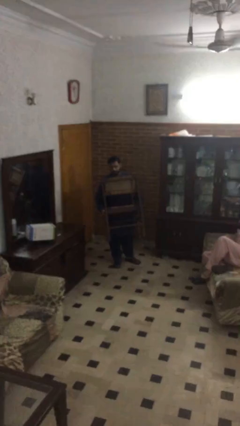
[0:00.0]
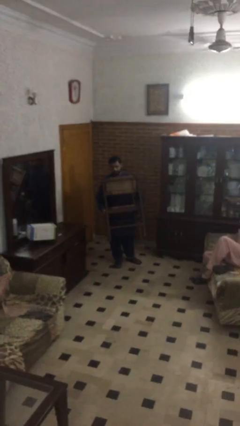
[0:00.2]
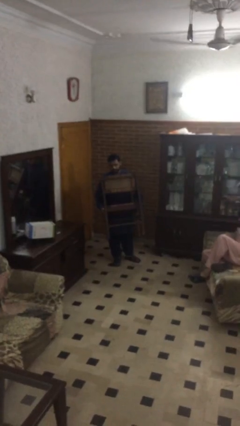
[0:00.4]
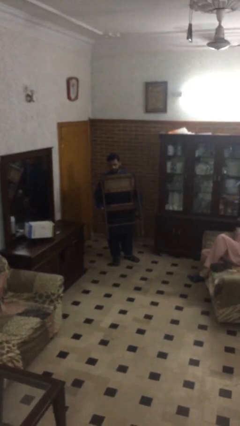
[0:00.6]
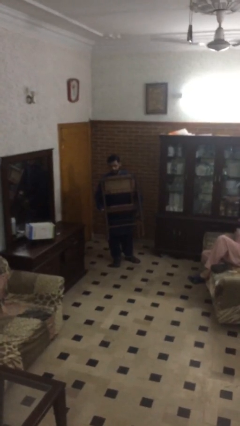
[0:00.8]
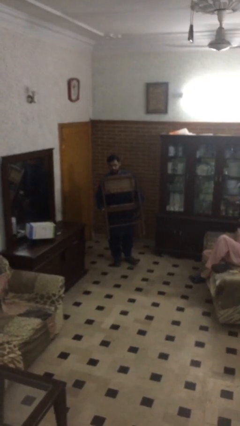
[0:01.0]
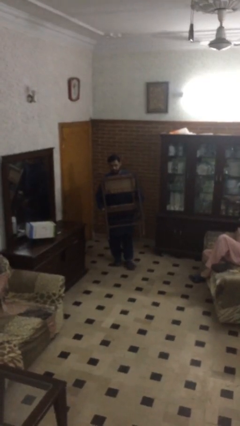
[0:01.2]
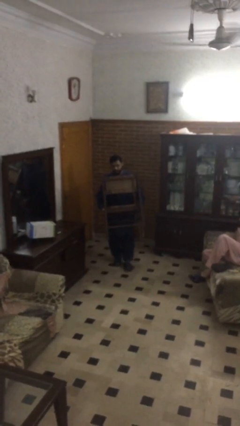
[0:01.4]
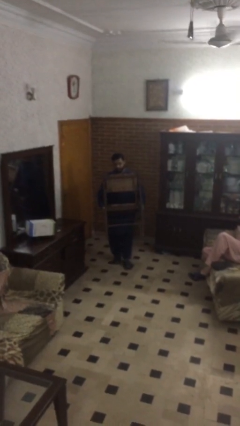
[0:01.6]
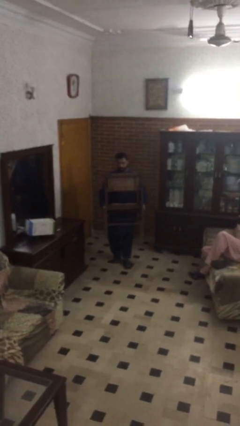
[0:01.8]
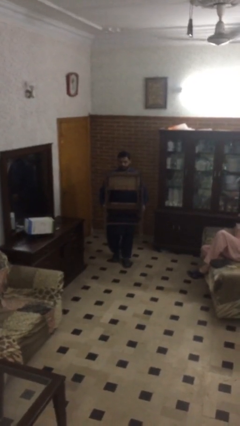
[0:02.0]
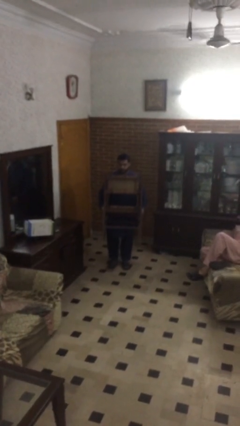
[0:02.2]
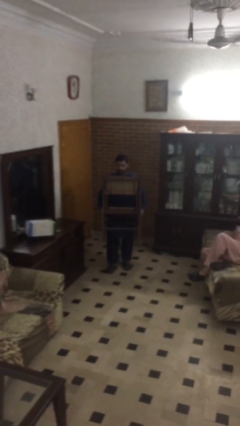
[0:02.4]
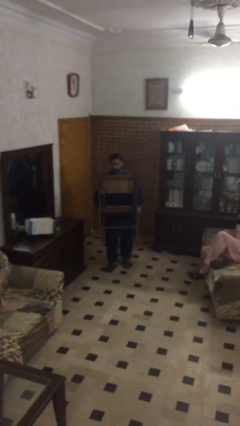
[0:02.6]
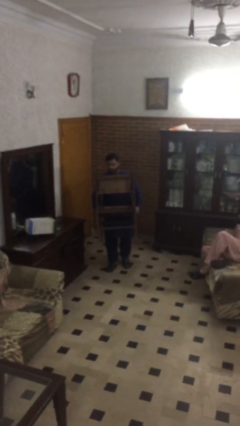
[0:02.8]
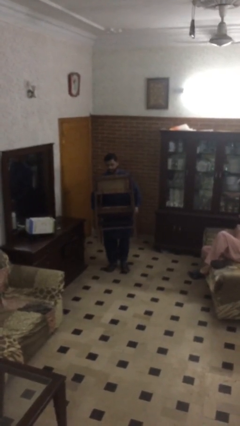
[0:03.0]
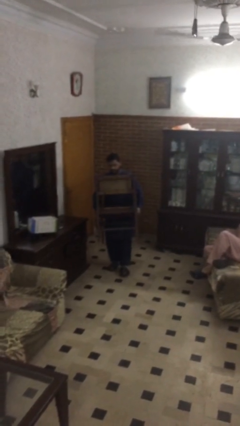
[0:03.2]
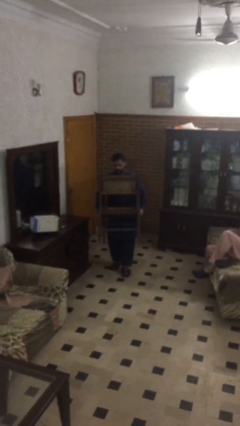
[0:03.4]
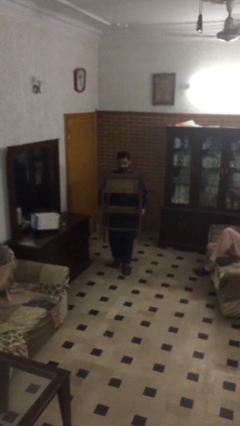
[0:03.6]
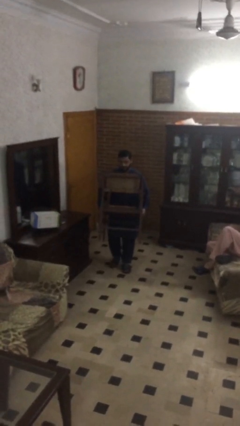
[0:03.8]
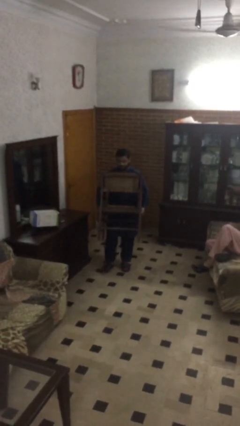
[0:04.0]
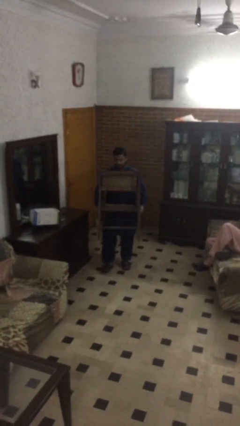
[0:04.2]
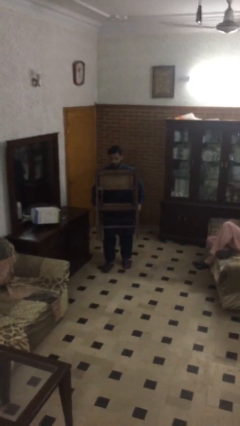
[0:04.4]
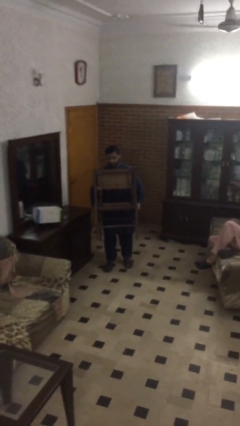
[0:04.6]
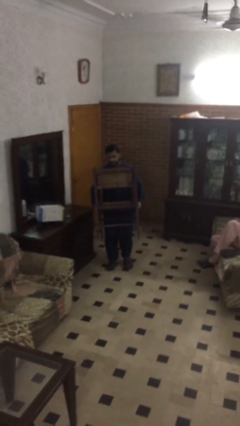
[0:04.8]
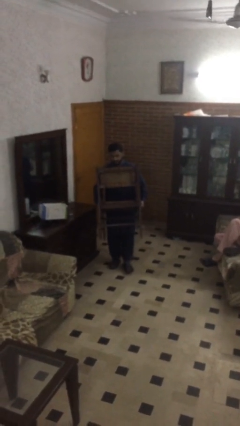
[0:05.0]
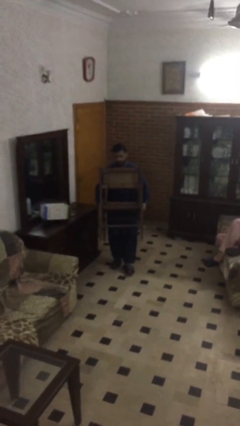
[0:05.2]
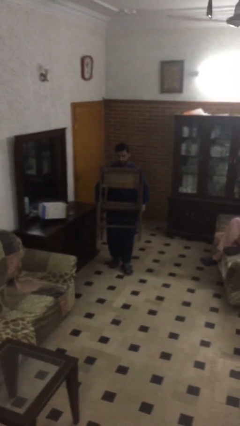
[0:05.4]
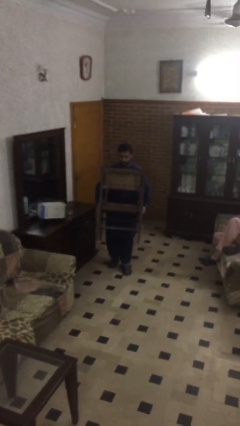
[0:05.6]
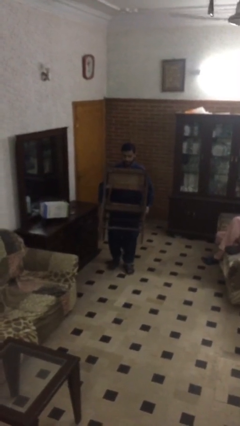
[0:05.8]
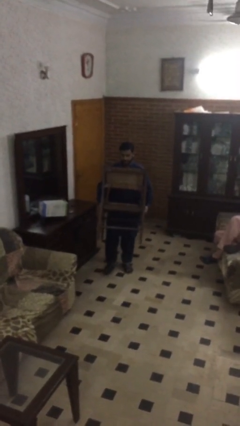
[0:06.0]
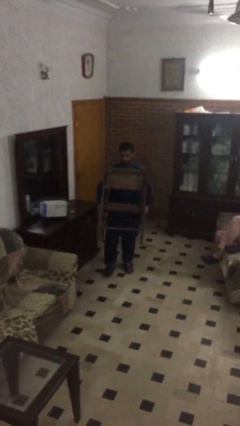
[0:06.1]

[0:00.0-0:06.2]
person carries heavy object

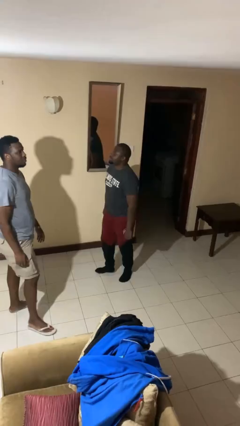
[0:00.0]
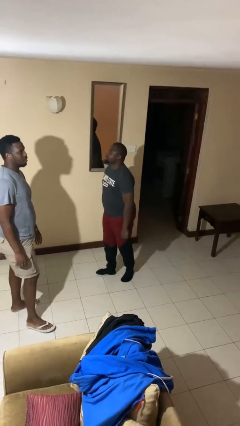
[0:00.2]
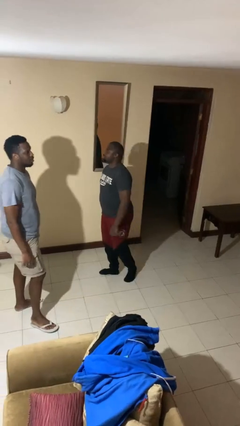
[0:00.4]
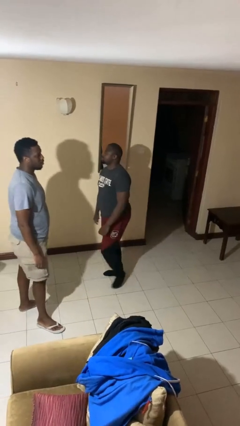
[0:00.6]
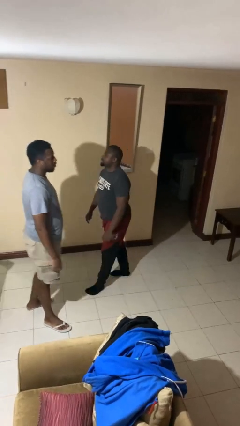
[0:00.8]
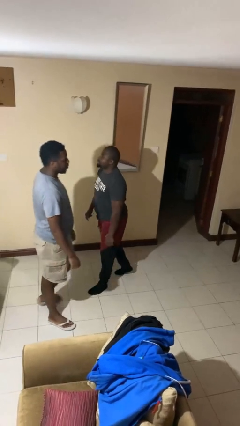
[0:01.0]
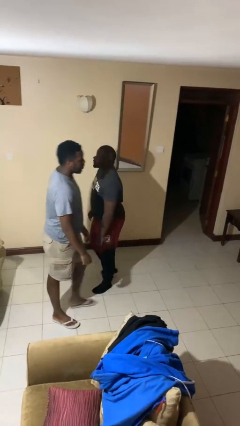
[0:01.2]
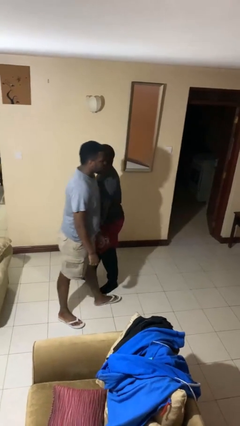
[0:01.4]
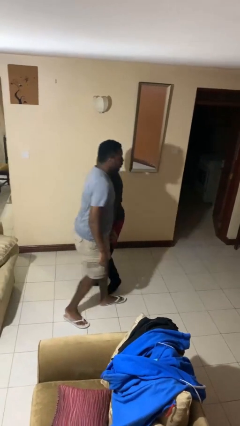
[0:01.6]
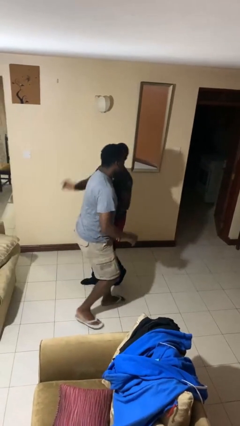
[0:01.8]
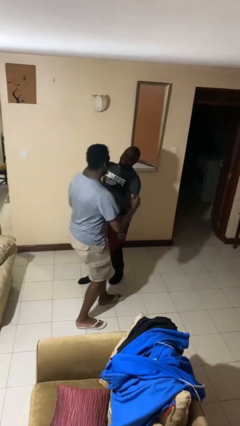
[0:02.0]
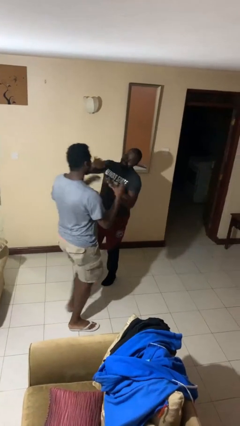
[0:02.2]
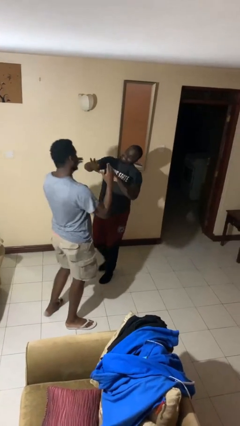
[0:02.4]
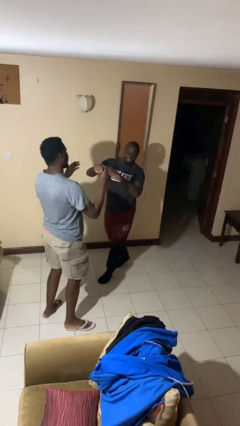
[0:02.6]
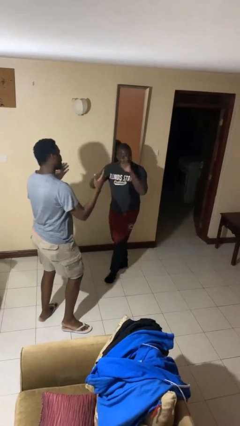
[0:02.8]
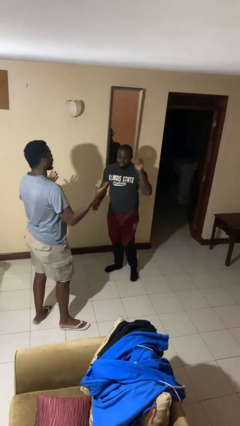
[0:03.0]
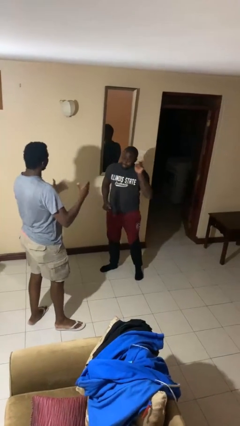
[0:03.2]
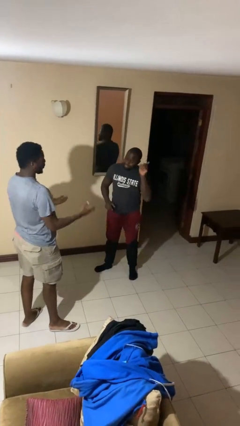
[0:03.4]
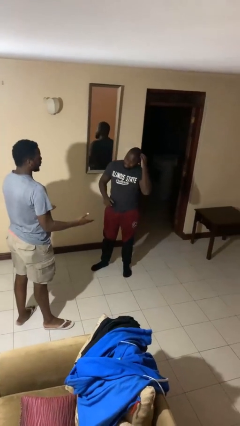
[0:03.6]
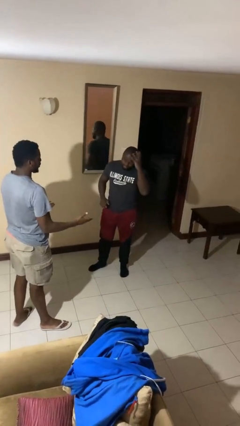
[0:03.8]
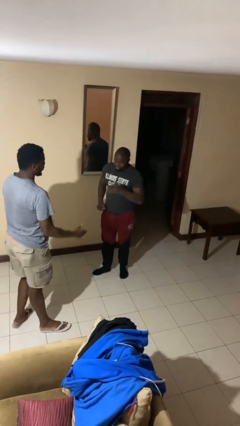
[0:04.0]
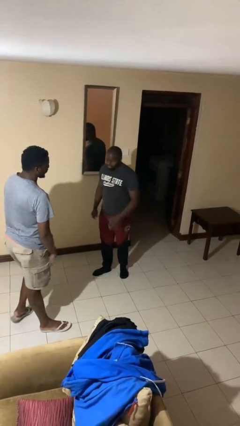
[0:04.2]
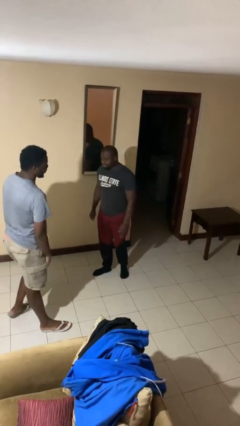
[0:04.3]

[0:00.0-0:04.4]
person bumps into person

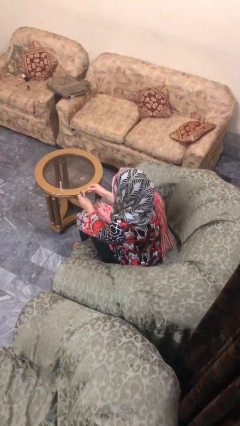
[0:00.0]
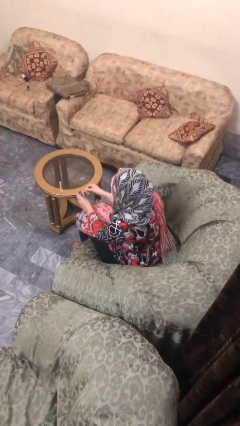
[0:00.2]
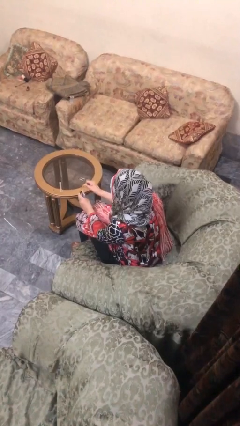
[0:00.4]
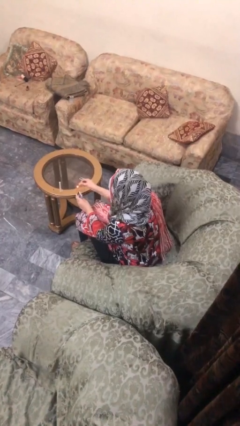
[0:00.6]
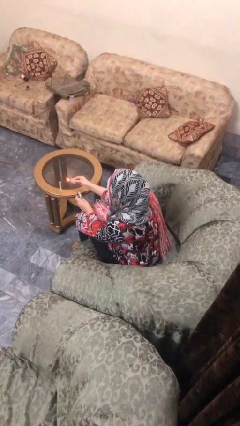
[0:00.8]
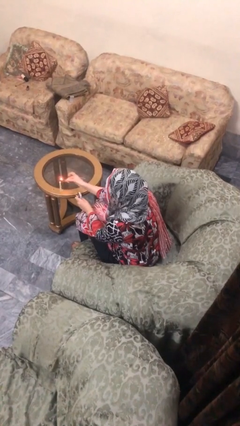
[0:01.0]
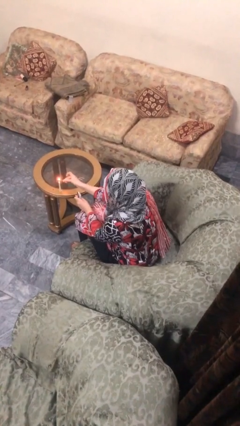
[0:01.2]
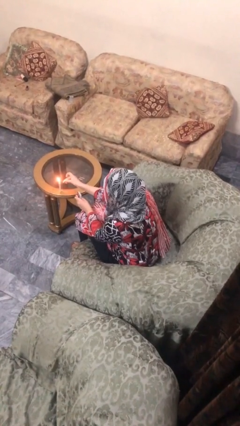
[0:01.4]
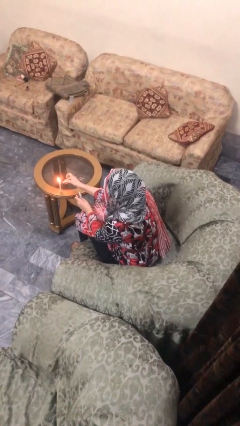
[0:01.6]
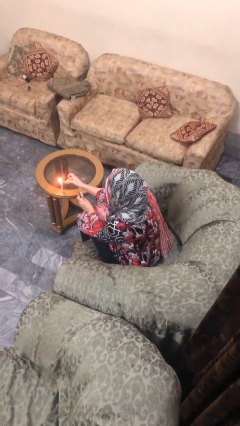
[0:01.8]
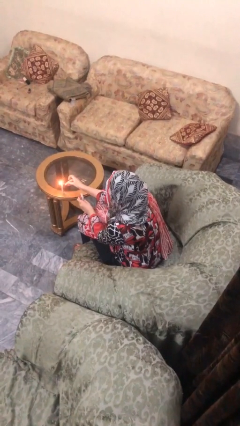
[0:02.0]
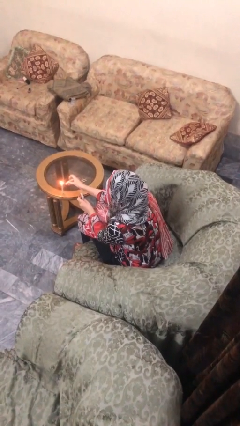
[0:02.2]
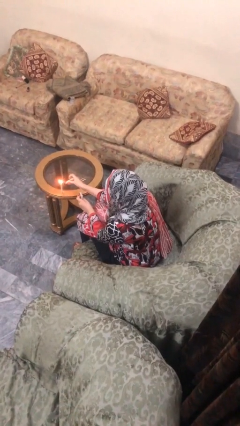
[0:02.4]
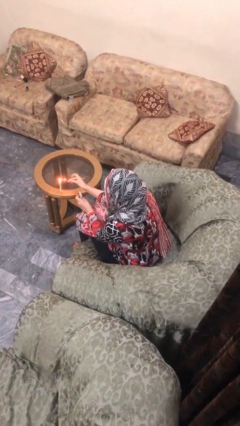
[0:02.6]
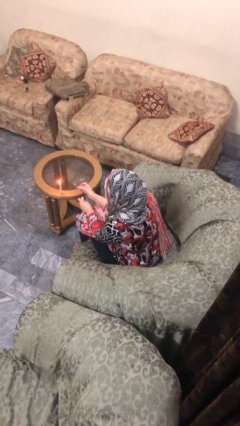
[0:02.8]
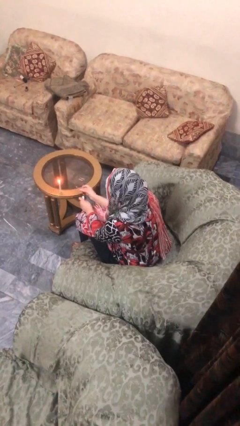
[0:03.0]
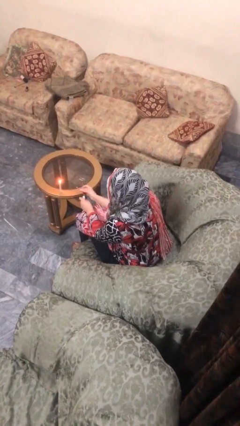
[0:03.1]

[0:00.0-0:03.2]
person lights candle

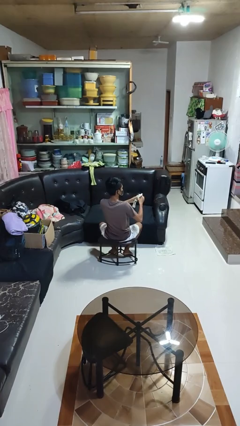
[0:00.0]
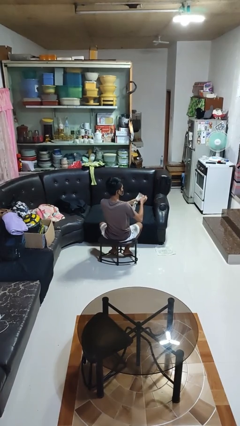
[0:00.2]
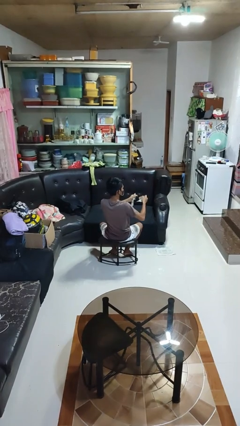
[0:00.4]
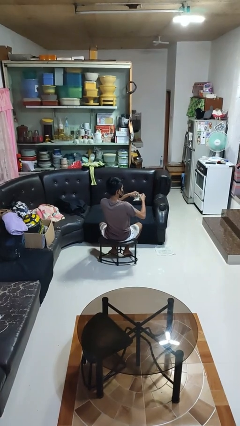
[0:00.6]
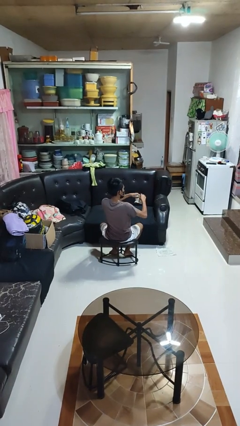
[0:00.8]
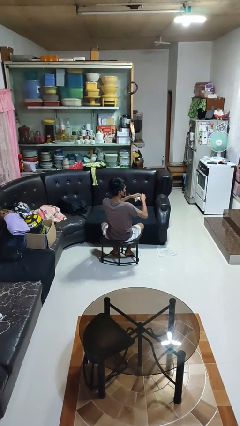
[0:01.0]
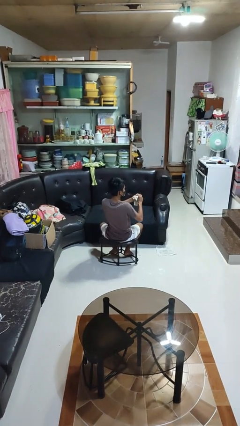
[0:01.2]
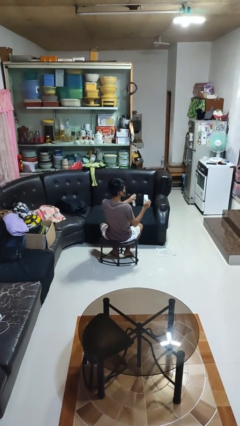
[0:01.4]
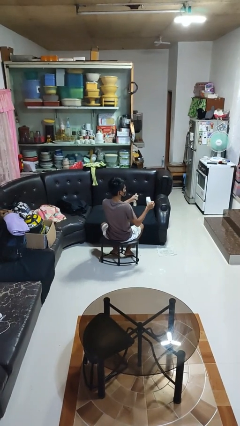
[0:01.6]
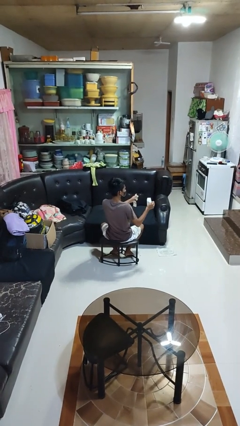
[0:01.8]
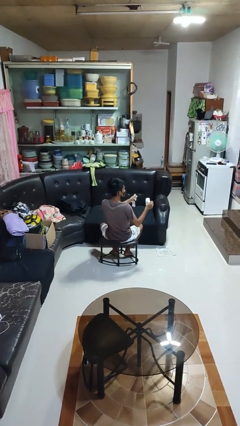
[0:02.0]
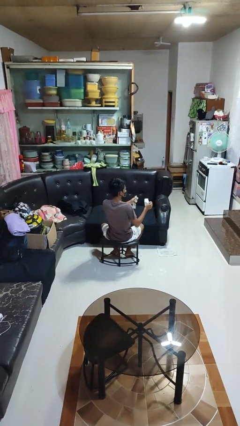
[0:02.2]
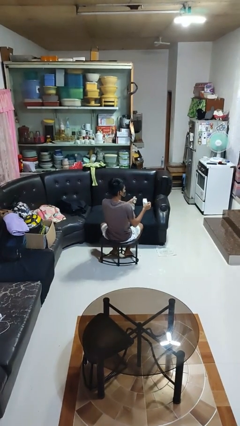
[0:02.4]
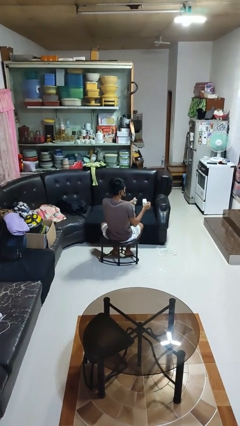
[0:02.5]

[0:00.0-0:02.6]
person tears paper

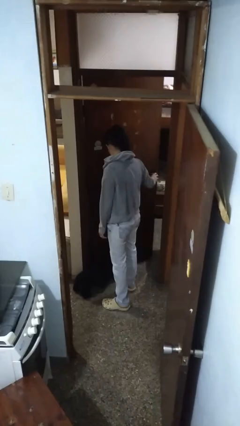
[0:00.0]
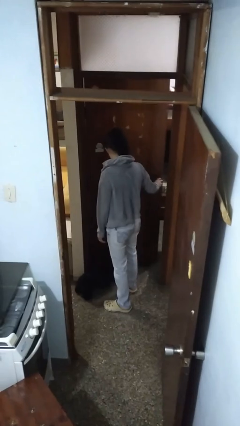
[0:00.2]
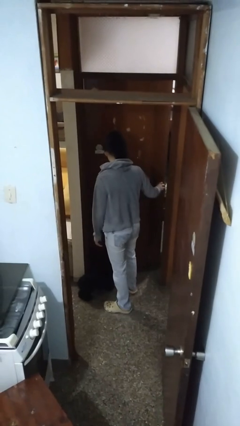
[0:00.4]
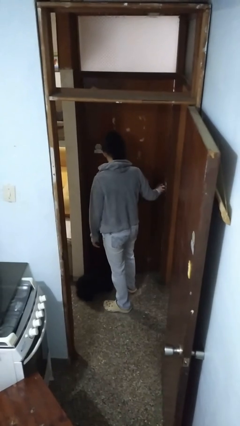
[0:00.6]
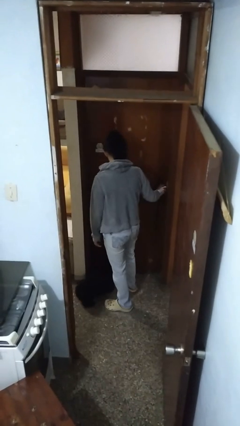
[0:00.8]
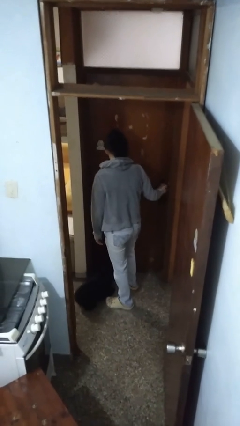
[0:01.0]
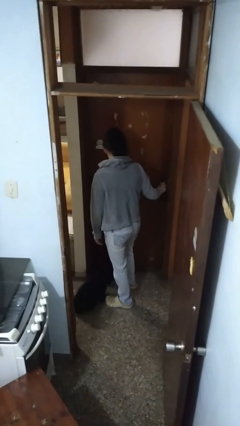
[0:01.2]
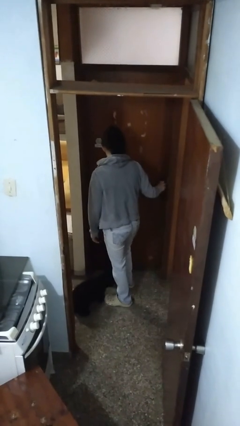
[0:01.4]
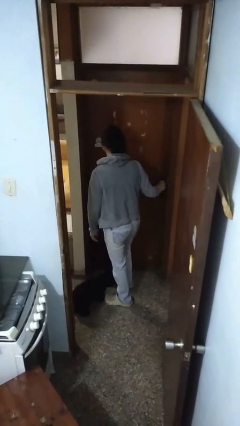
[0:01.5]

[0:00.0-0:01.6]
person closes facility door
